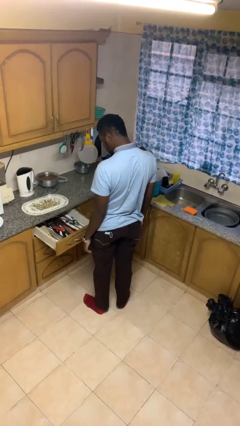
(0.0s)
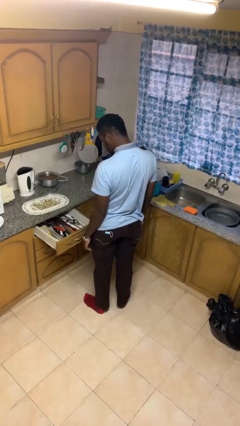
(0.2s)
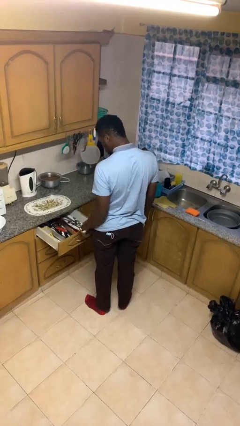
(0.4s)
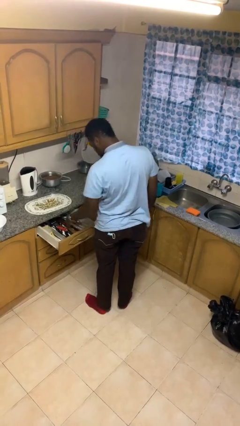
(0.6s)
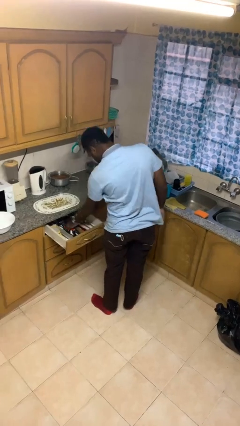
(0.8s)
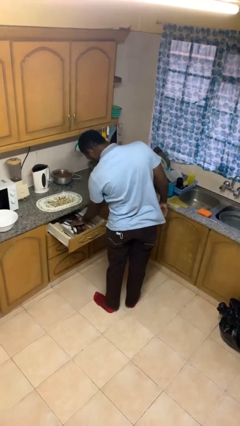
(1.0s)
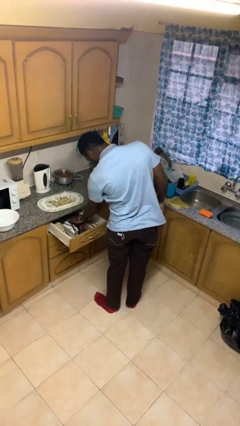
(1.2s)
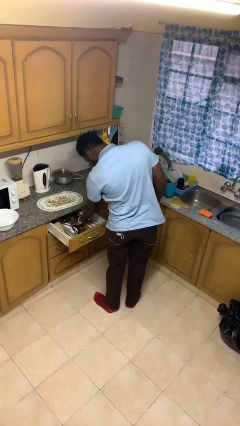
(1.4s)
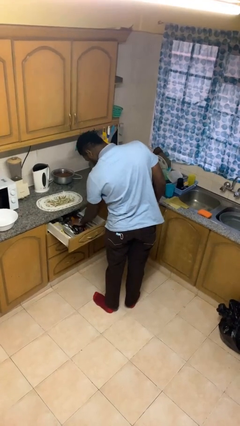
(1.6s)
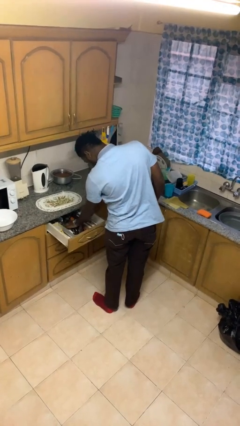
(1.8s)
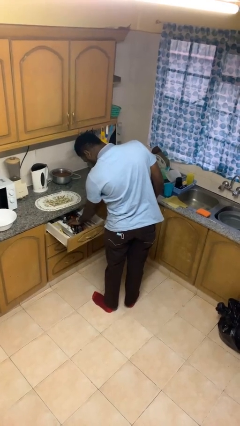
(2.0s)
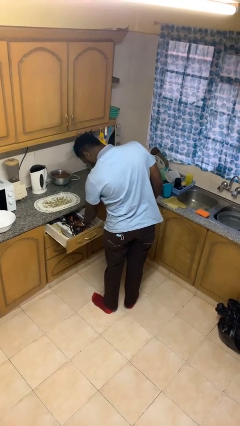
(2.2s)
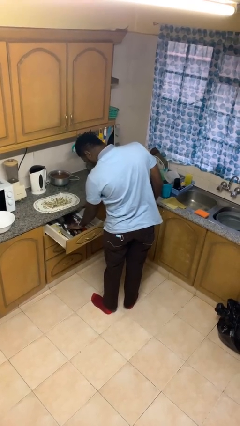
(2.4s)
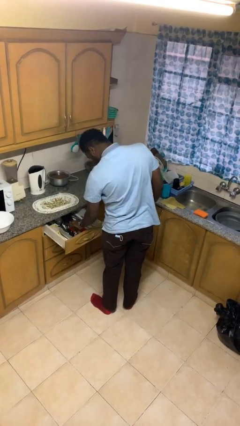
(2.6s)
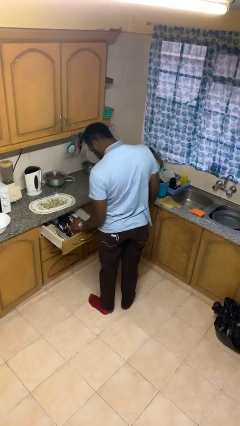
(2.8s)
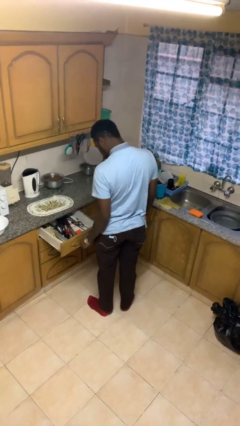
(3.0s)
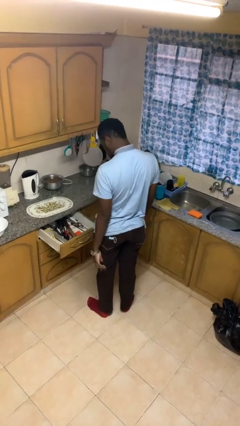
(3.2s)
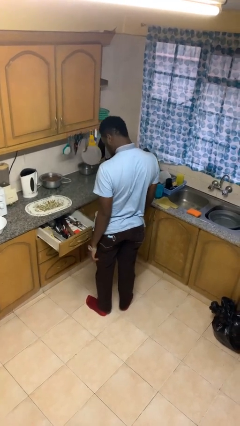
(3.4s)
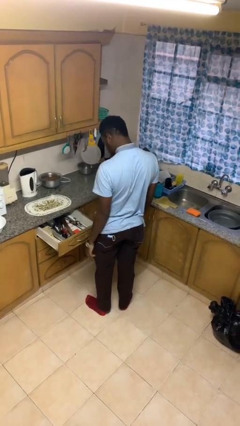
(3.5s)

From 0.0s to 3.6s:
person searches in kitchen drawer

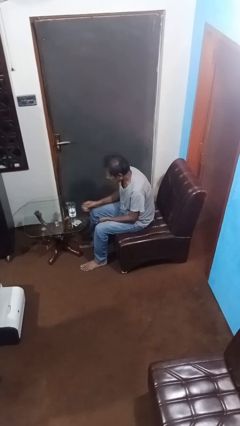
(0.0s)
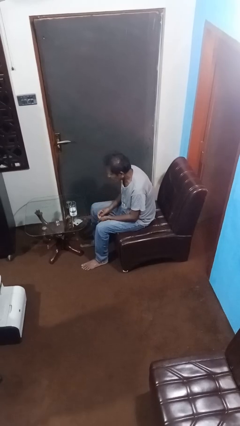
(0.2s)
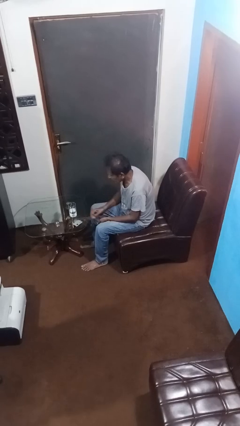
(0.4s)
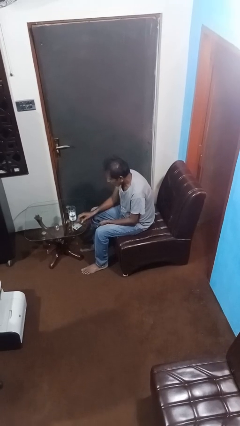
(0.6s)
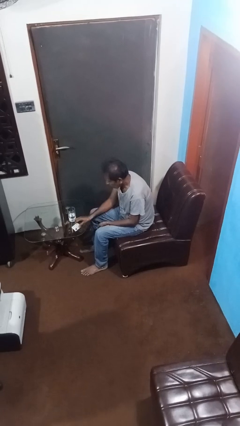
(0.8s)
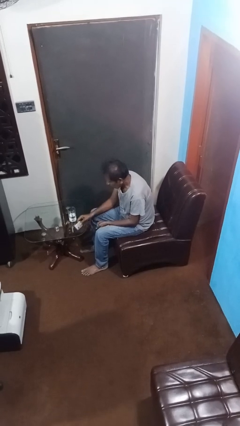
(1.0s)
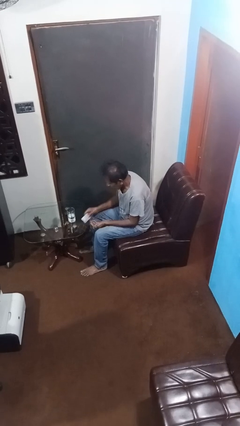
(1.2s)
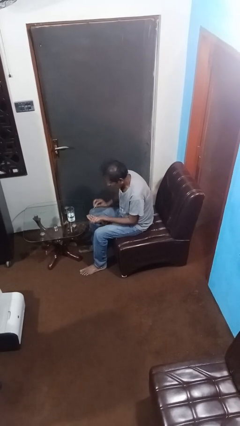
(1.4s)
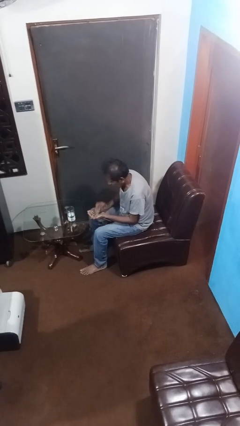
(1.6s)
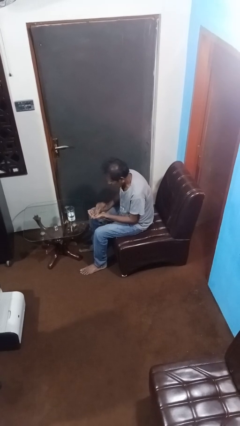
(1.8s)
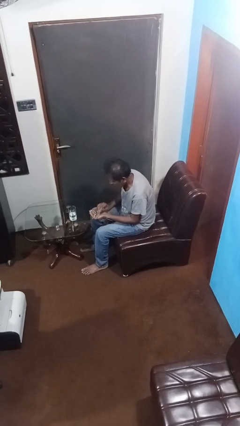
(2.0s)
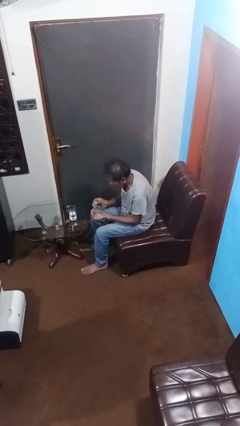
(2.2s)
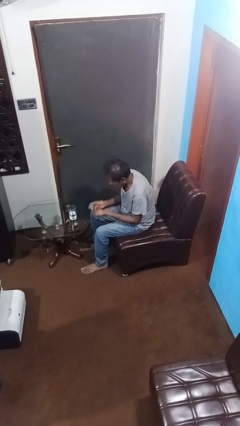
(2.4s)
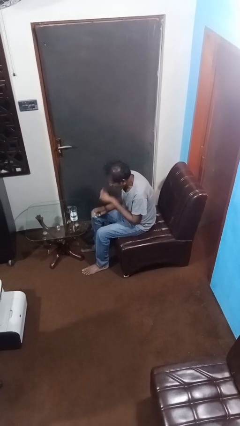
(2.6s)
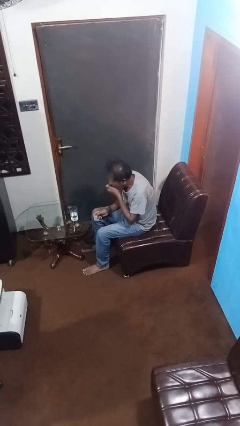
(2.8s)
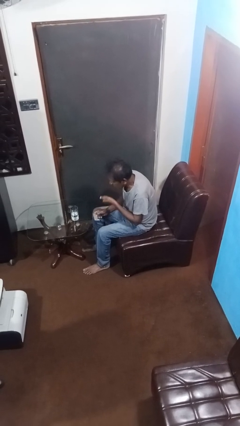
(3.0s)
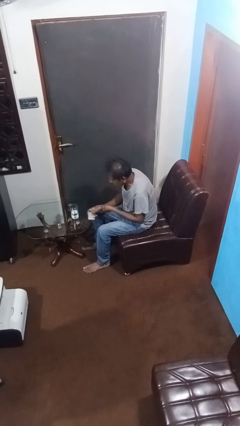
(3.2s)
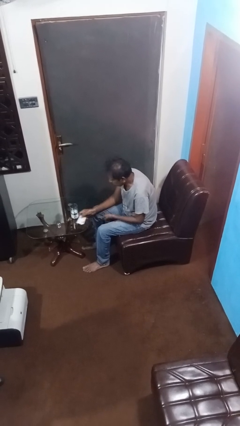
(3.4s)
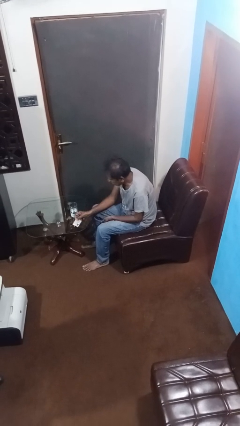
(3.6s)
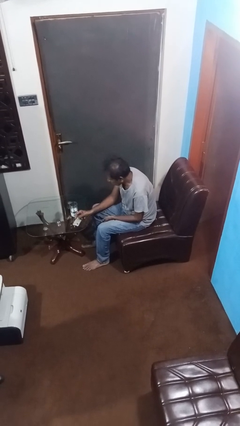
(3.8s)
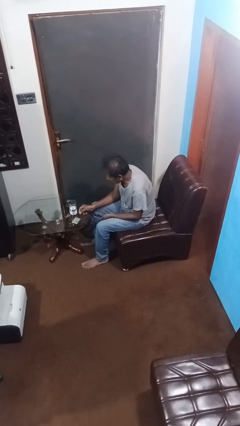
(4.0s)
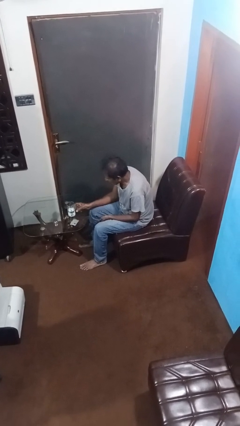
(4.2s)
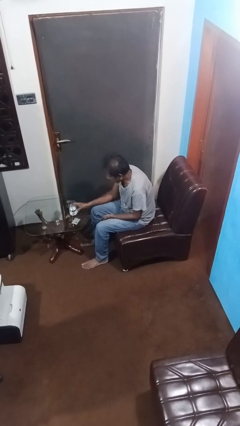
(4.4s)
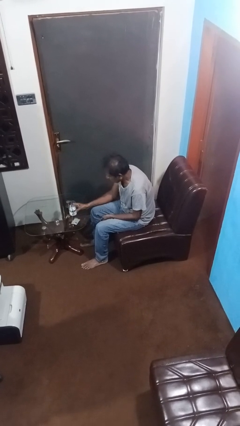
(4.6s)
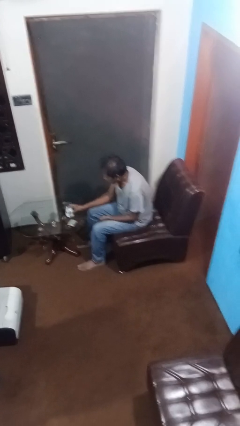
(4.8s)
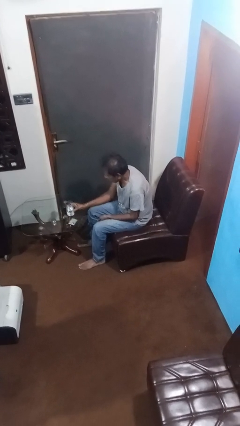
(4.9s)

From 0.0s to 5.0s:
person takes medicine pills

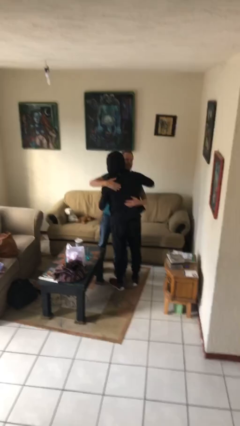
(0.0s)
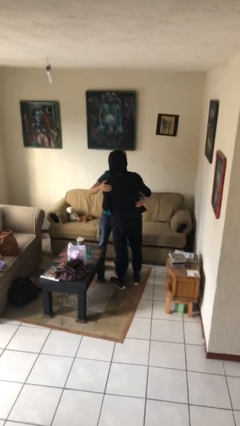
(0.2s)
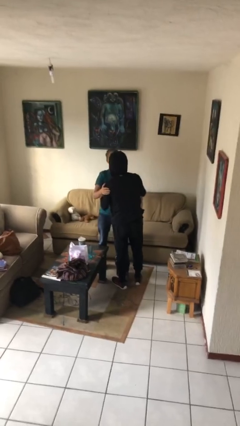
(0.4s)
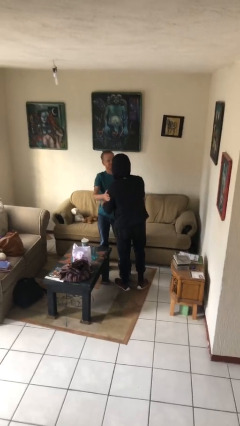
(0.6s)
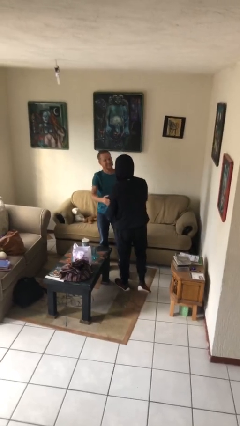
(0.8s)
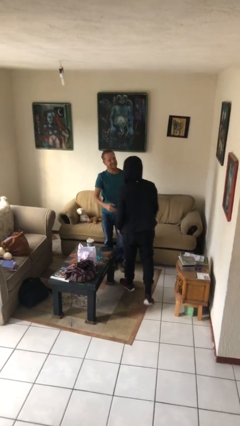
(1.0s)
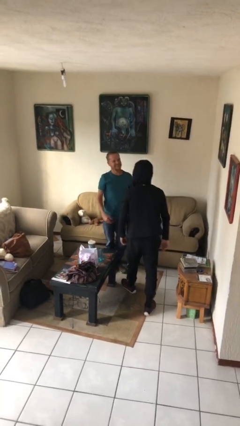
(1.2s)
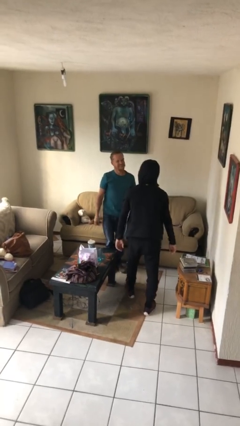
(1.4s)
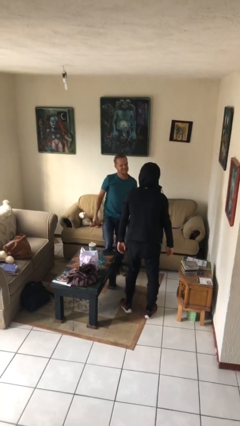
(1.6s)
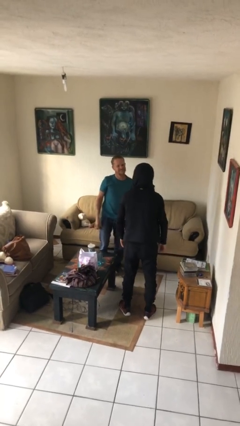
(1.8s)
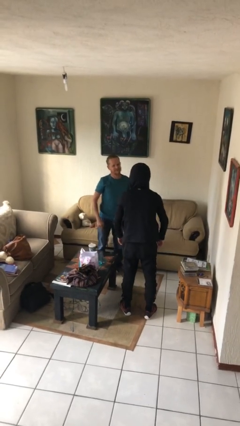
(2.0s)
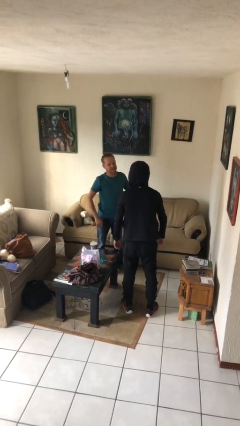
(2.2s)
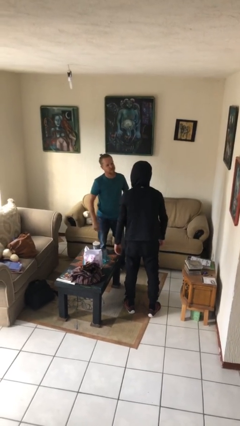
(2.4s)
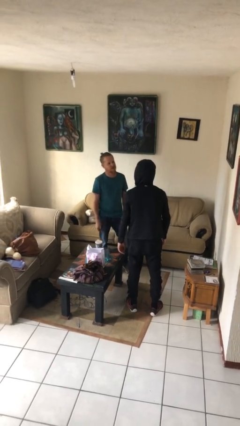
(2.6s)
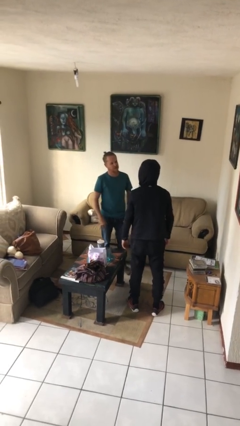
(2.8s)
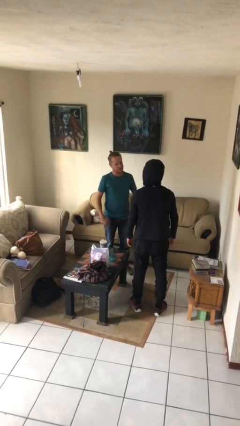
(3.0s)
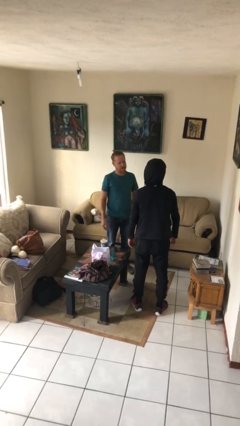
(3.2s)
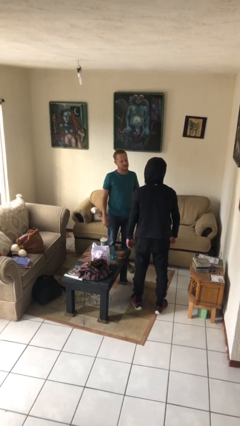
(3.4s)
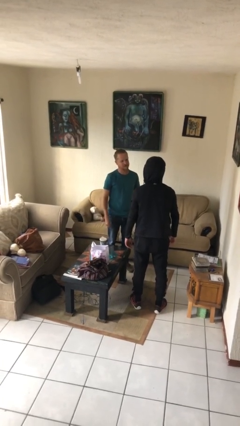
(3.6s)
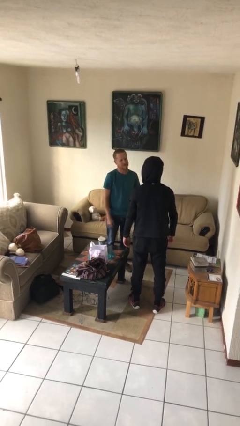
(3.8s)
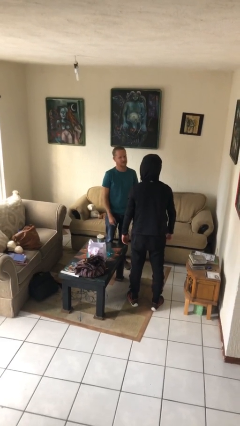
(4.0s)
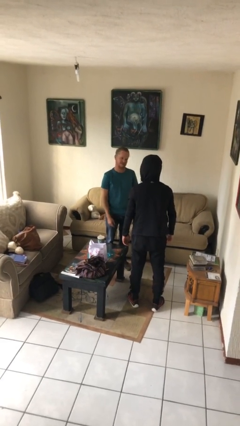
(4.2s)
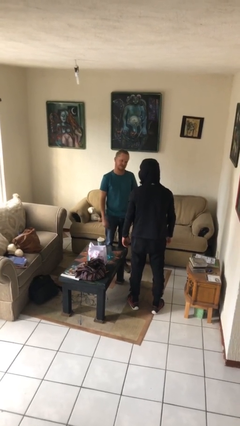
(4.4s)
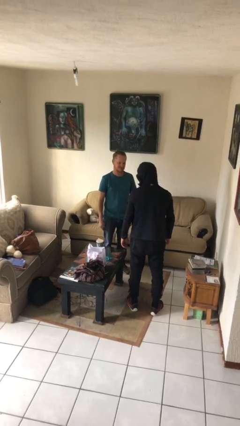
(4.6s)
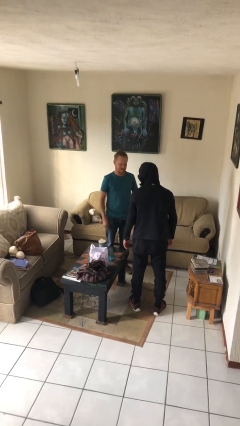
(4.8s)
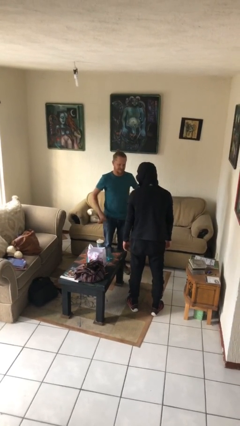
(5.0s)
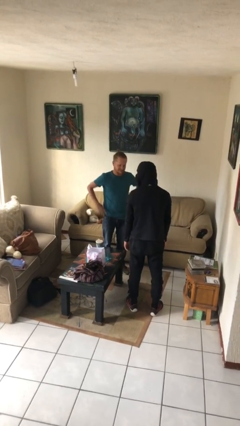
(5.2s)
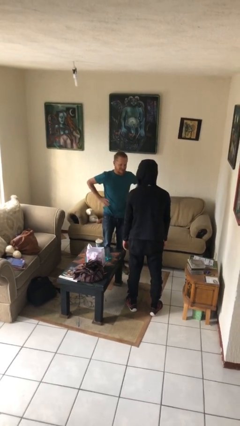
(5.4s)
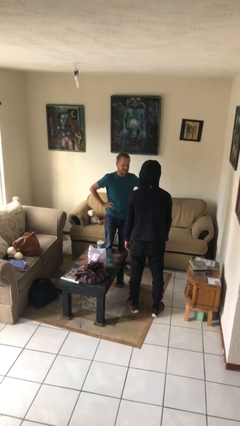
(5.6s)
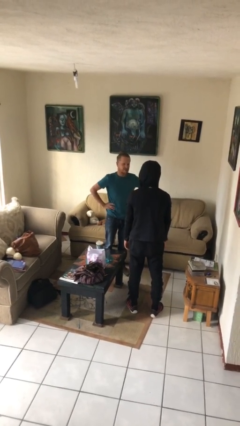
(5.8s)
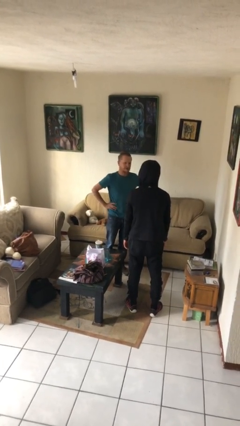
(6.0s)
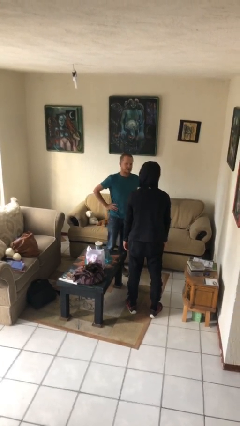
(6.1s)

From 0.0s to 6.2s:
person talks to person

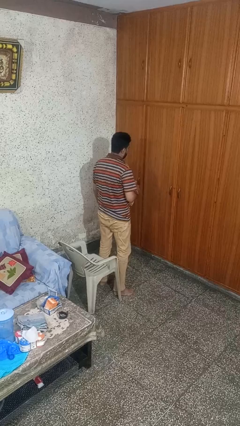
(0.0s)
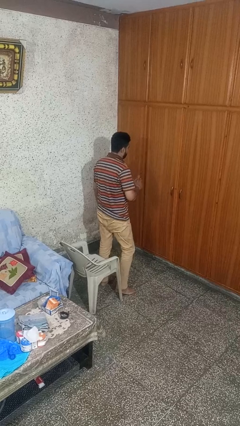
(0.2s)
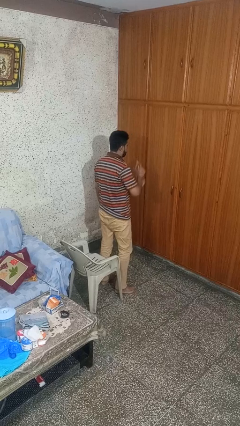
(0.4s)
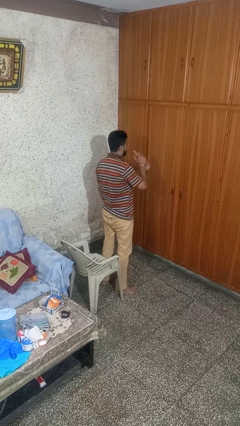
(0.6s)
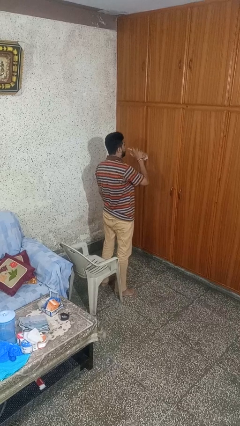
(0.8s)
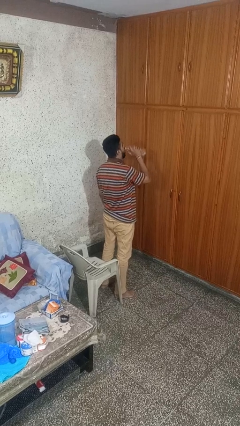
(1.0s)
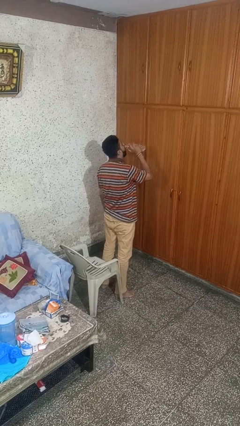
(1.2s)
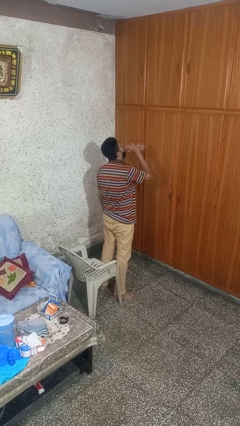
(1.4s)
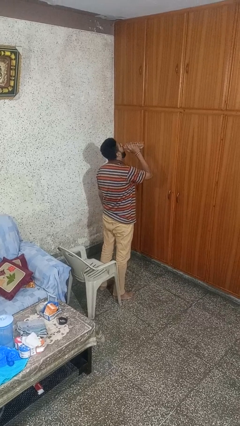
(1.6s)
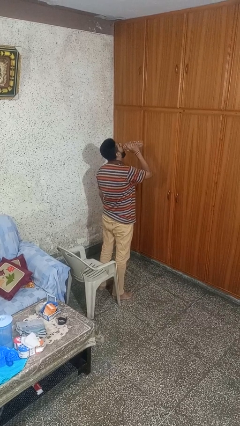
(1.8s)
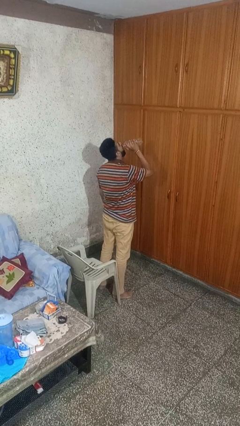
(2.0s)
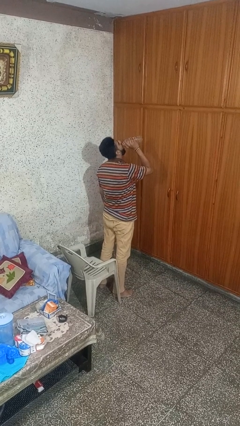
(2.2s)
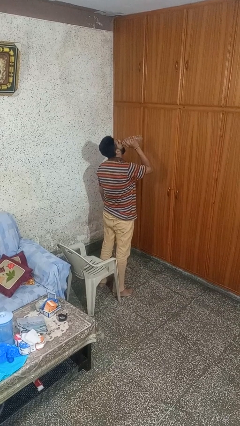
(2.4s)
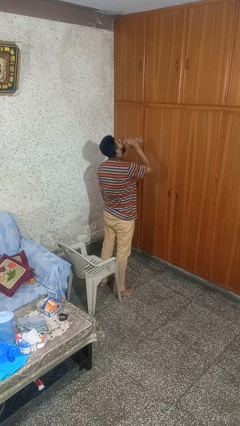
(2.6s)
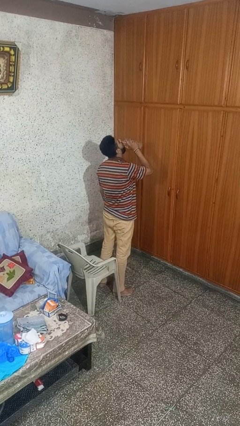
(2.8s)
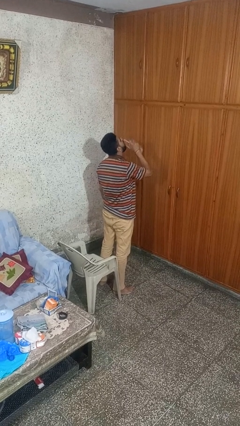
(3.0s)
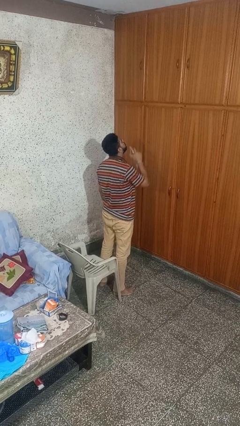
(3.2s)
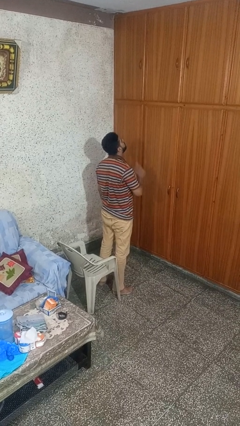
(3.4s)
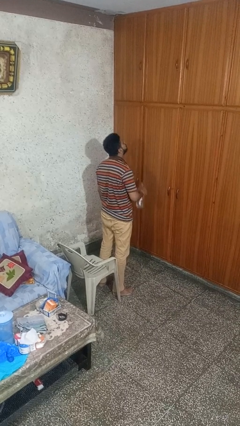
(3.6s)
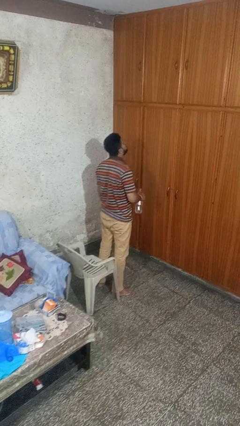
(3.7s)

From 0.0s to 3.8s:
person drinks from bottle
